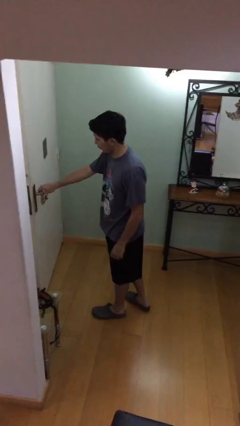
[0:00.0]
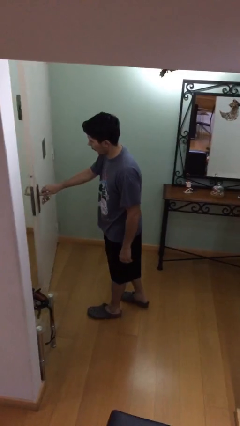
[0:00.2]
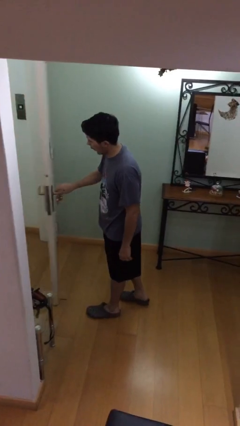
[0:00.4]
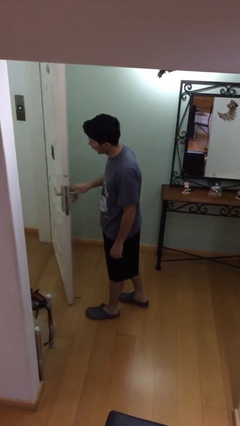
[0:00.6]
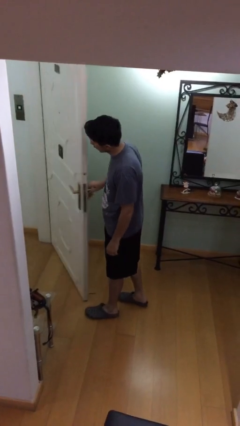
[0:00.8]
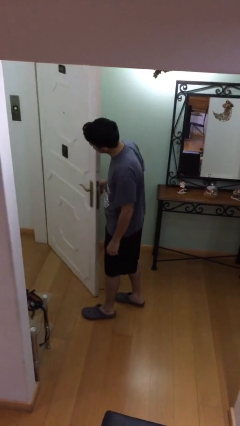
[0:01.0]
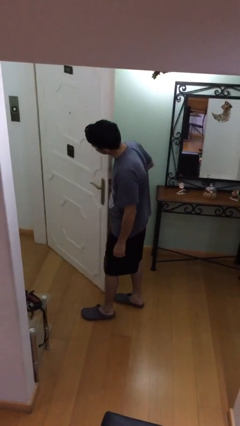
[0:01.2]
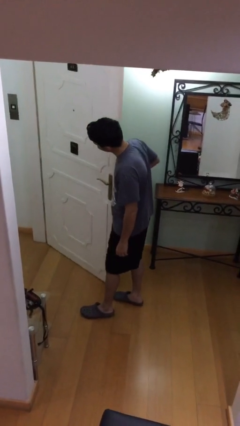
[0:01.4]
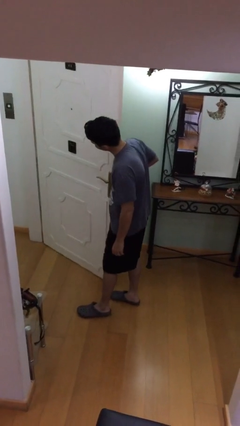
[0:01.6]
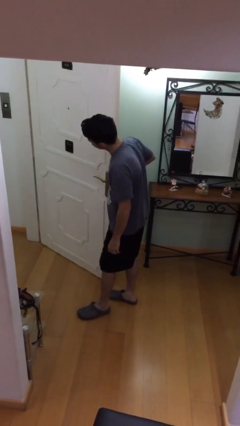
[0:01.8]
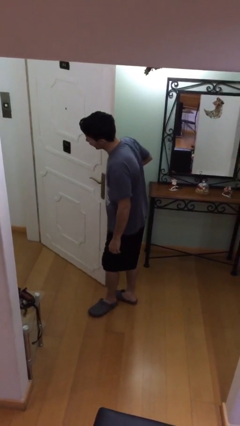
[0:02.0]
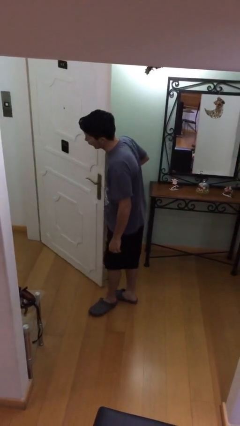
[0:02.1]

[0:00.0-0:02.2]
person opens facility door

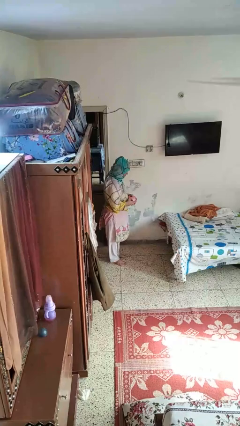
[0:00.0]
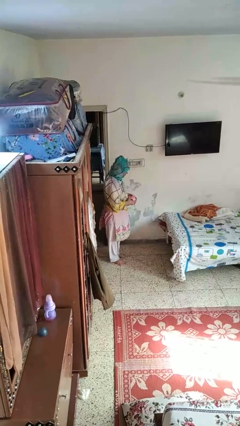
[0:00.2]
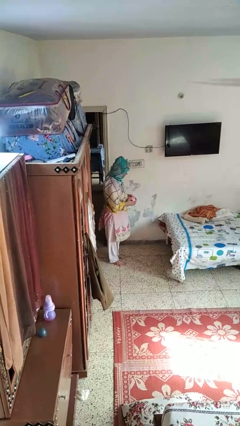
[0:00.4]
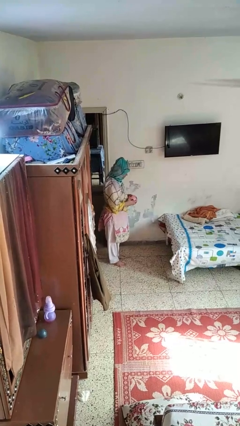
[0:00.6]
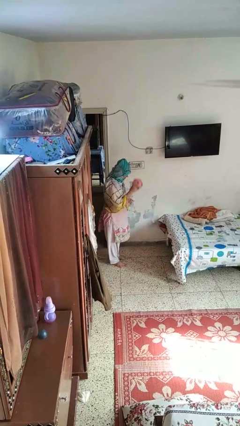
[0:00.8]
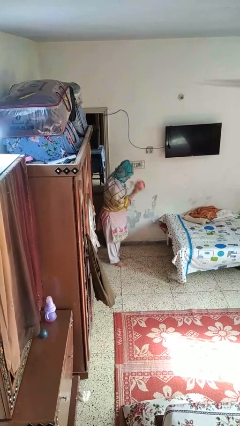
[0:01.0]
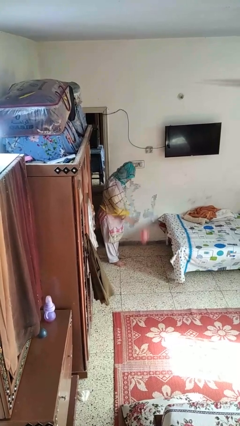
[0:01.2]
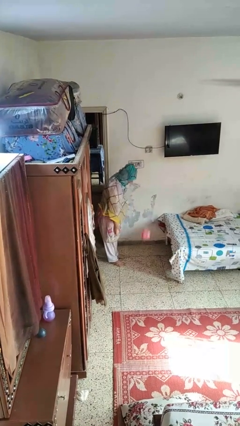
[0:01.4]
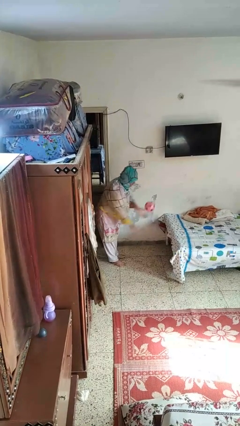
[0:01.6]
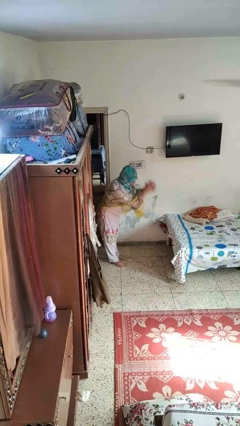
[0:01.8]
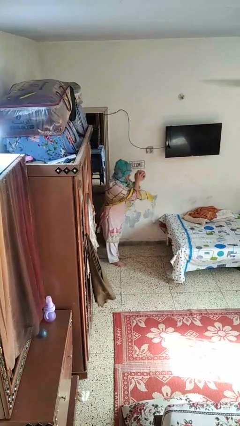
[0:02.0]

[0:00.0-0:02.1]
person bounces ball on floor

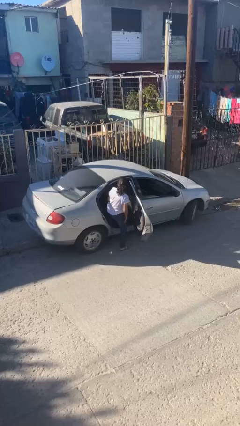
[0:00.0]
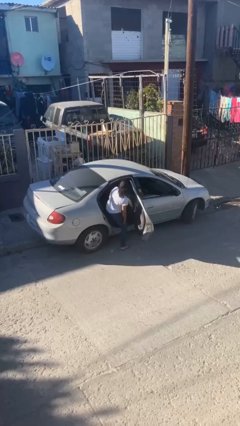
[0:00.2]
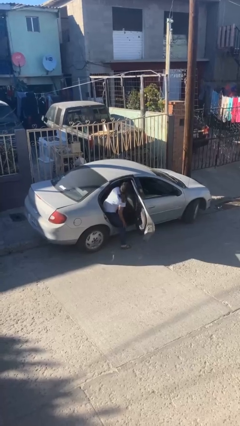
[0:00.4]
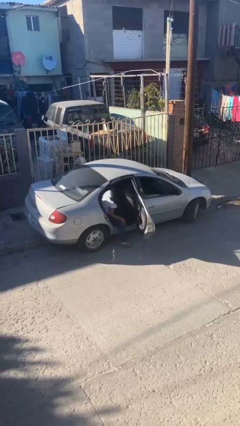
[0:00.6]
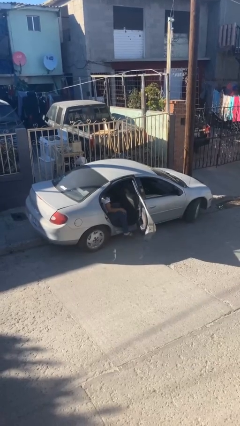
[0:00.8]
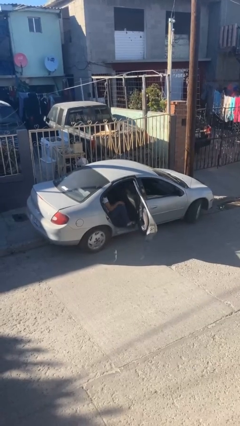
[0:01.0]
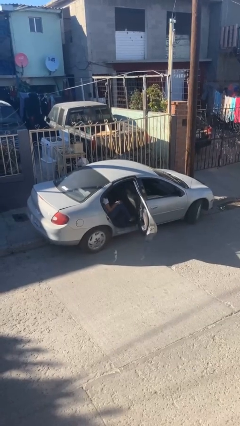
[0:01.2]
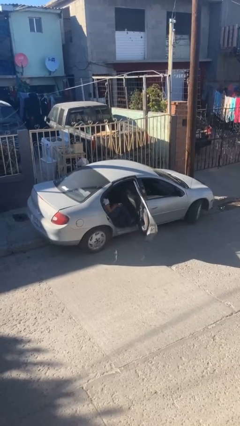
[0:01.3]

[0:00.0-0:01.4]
person enters car

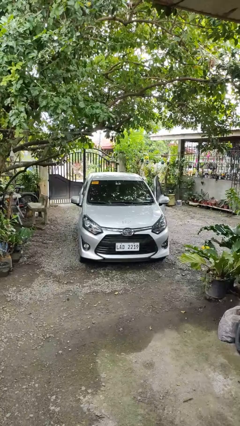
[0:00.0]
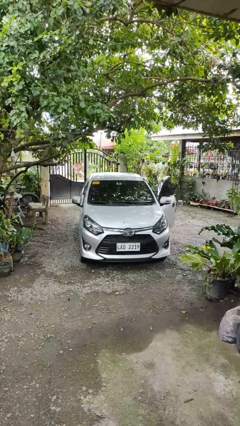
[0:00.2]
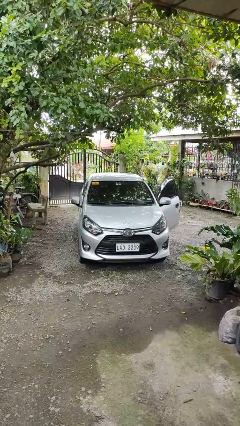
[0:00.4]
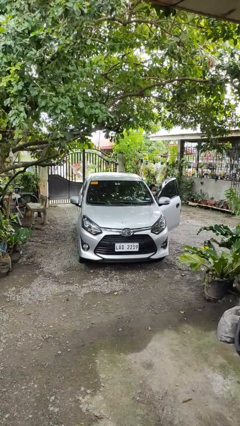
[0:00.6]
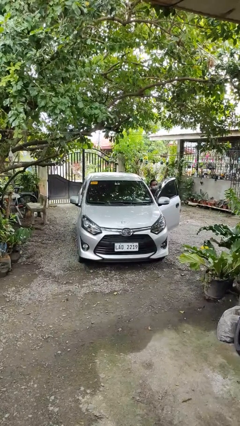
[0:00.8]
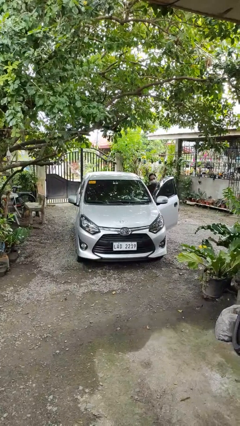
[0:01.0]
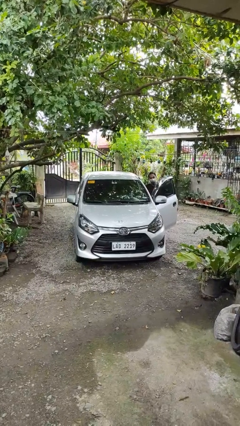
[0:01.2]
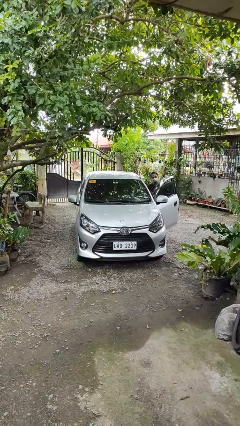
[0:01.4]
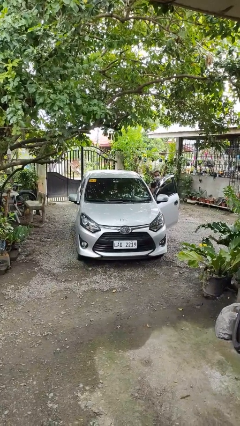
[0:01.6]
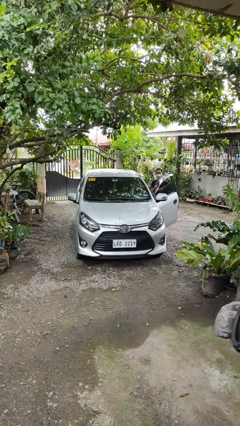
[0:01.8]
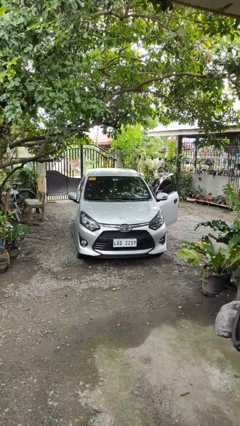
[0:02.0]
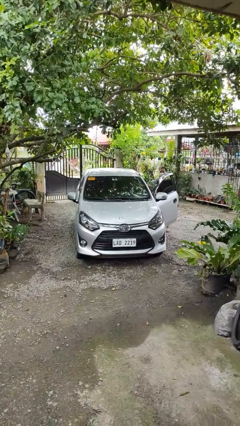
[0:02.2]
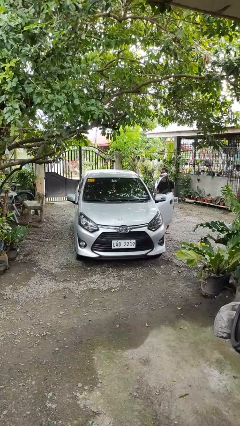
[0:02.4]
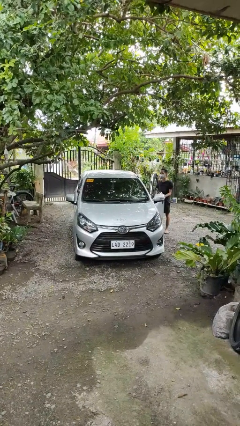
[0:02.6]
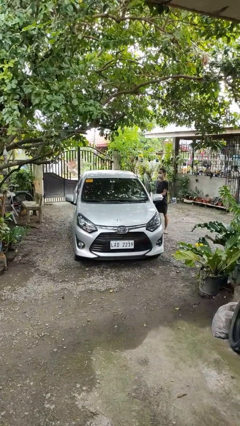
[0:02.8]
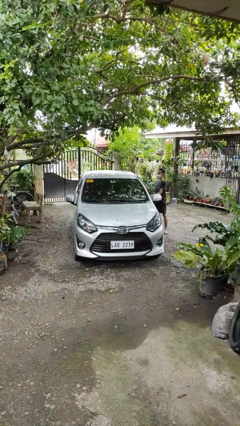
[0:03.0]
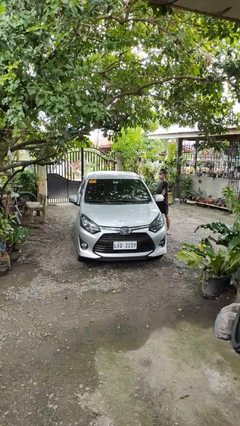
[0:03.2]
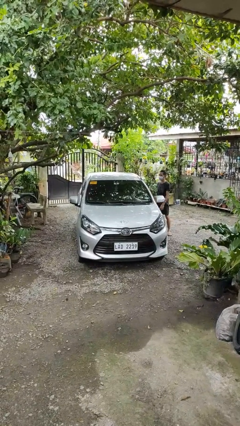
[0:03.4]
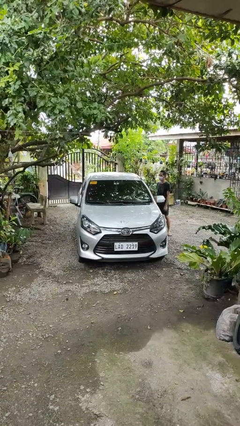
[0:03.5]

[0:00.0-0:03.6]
car drops off person

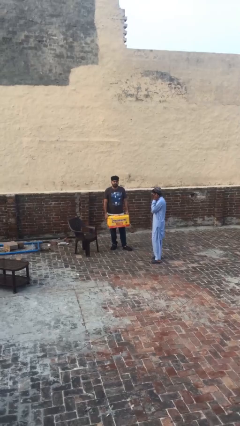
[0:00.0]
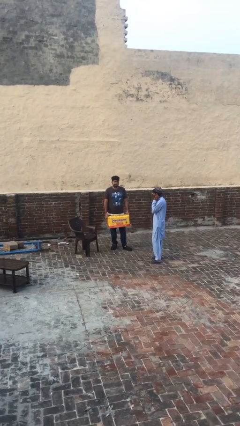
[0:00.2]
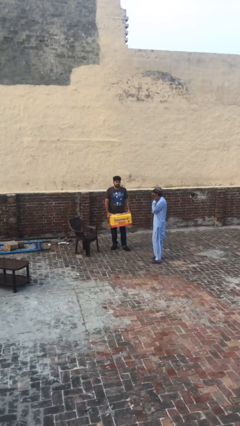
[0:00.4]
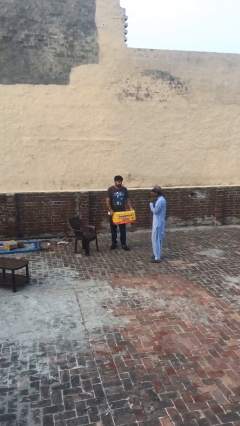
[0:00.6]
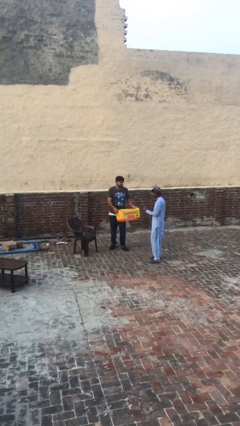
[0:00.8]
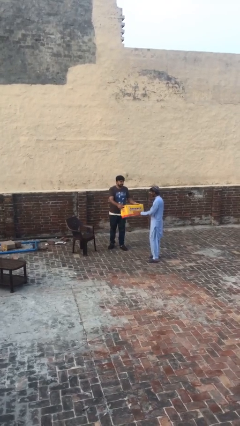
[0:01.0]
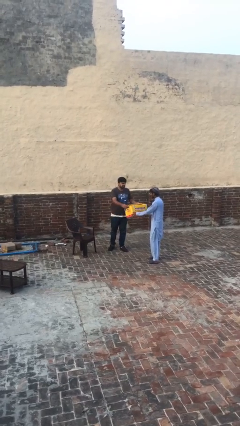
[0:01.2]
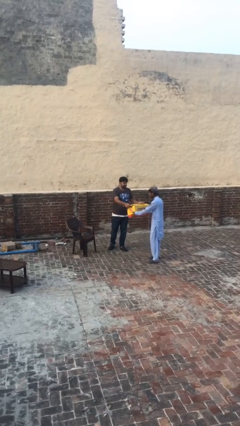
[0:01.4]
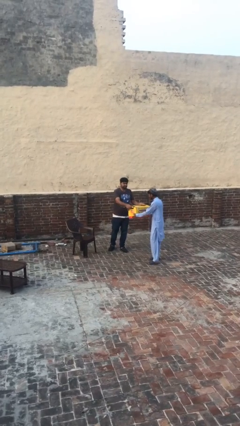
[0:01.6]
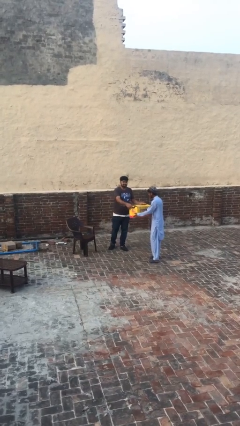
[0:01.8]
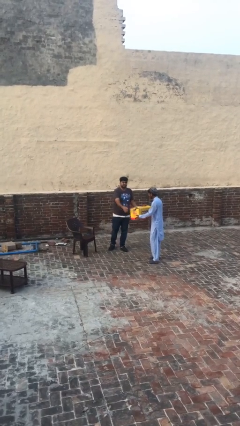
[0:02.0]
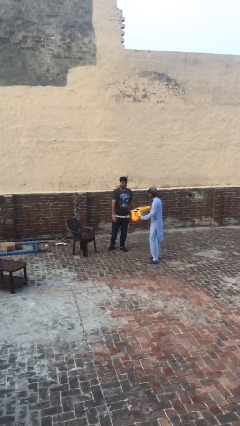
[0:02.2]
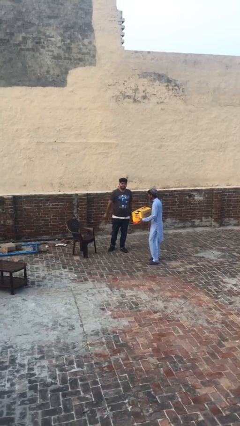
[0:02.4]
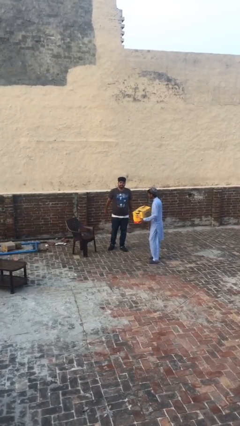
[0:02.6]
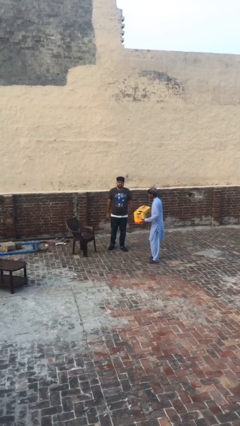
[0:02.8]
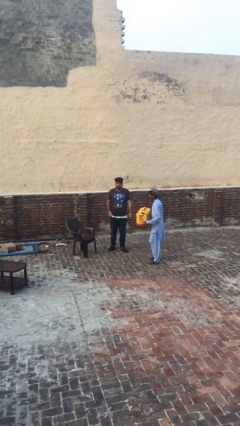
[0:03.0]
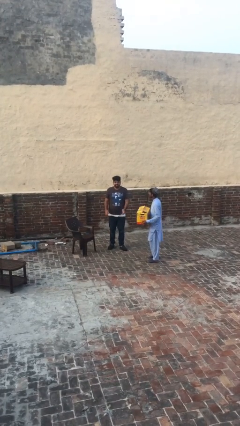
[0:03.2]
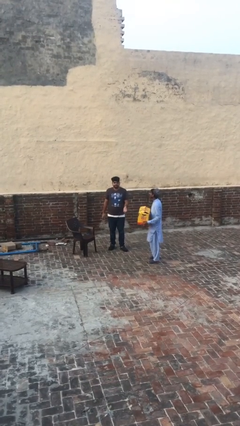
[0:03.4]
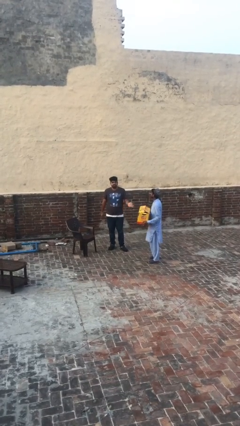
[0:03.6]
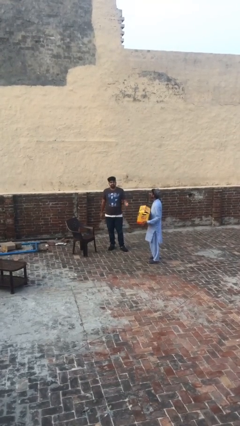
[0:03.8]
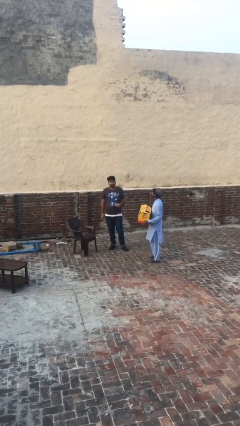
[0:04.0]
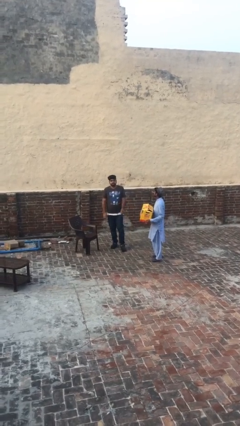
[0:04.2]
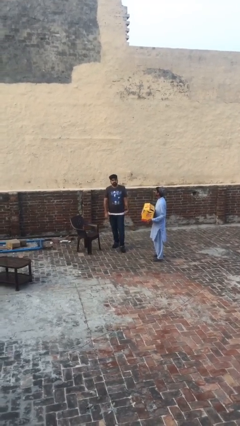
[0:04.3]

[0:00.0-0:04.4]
person transfers object to person

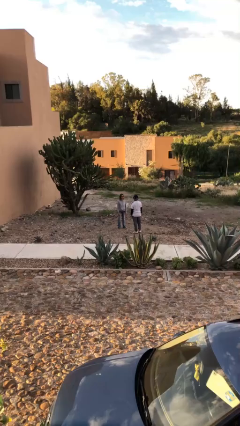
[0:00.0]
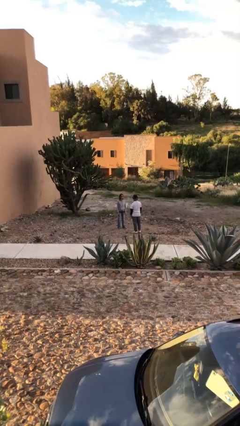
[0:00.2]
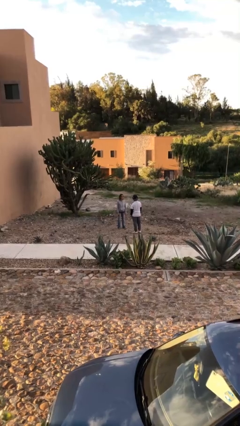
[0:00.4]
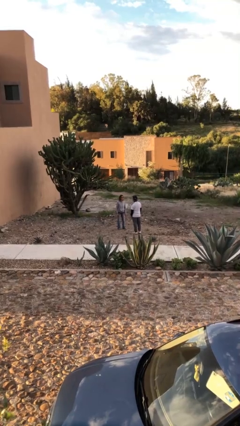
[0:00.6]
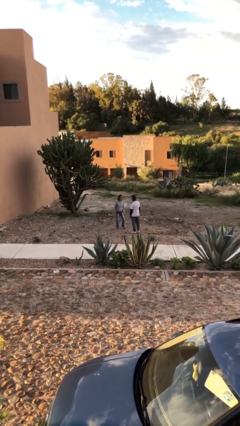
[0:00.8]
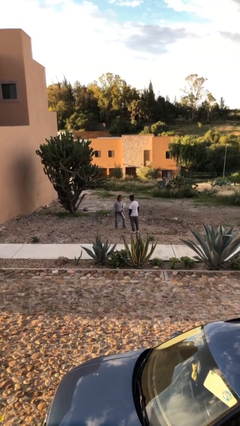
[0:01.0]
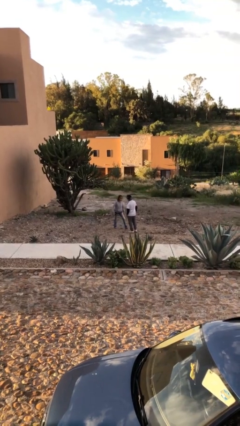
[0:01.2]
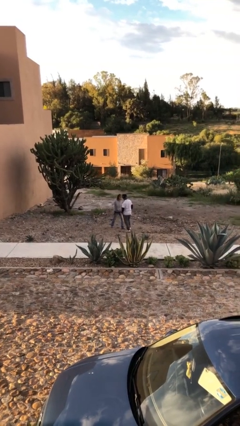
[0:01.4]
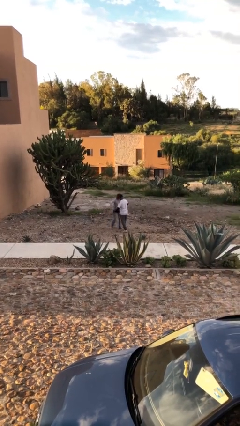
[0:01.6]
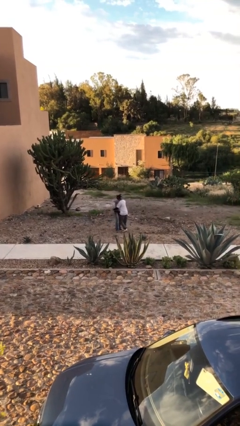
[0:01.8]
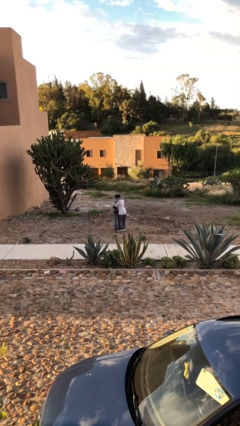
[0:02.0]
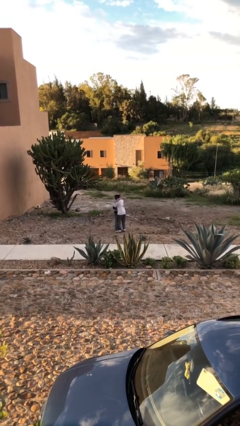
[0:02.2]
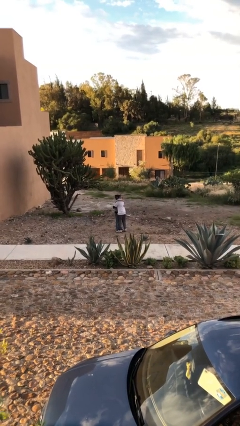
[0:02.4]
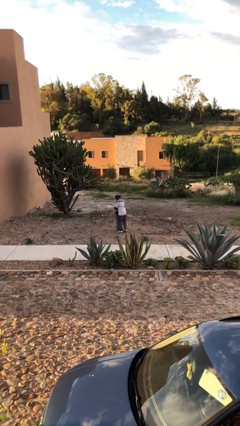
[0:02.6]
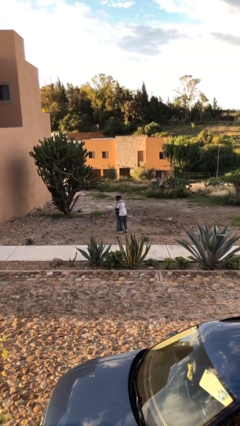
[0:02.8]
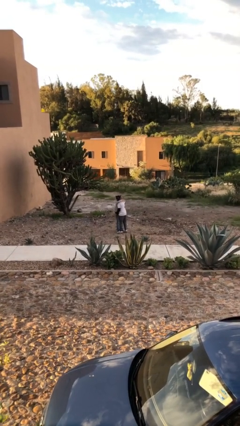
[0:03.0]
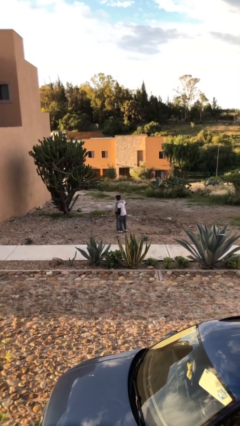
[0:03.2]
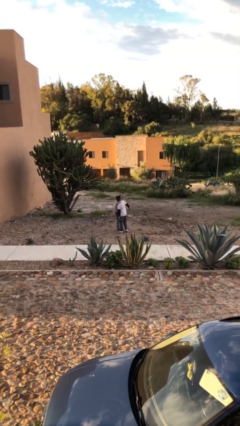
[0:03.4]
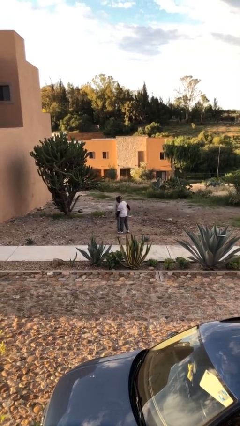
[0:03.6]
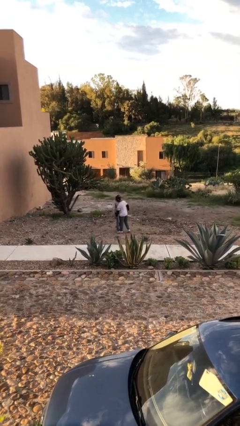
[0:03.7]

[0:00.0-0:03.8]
person embraces person
